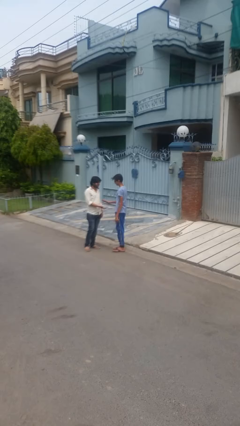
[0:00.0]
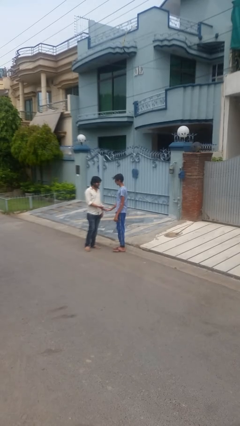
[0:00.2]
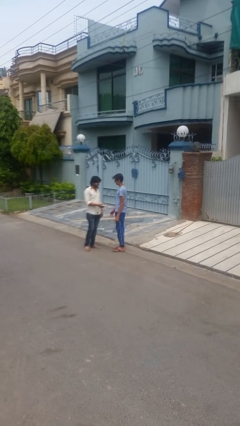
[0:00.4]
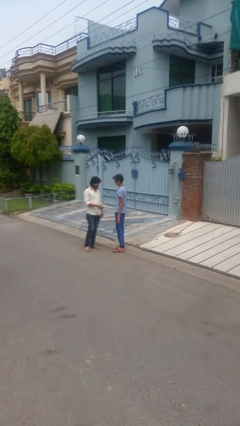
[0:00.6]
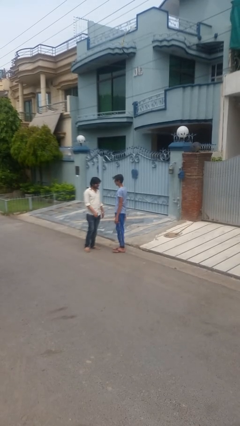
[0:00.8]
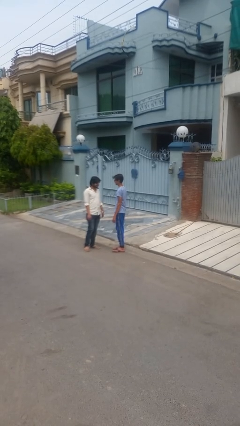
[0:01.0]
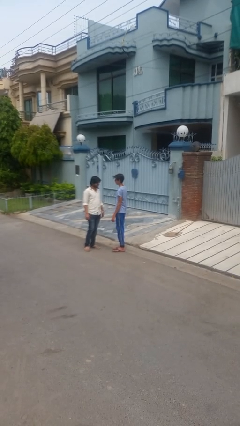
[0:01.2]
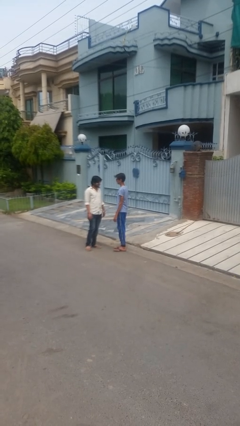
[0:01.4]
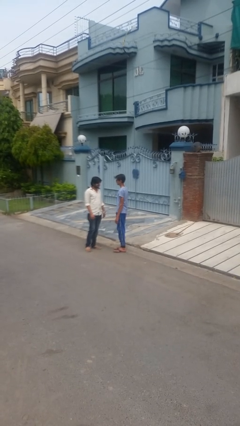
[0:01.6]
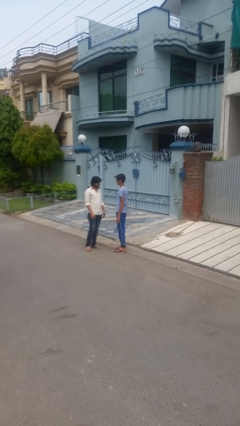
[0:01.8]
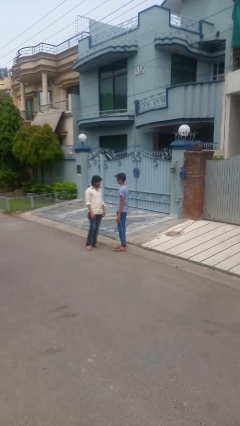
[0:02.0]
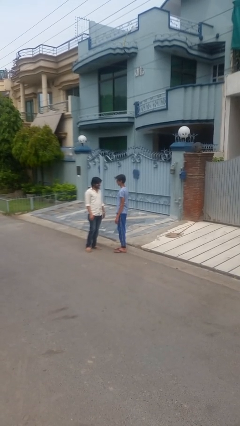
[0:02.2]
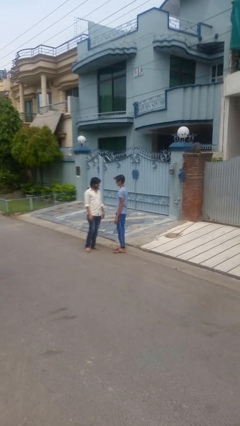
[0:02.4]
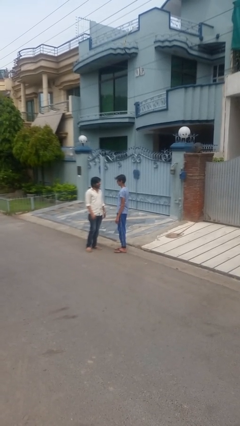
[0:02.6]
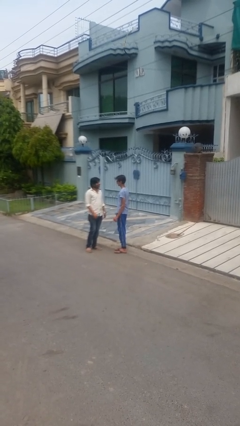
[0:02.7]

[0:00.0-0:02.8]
person highfives hand

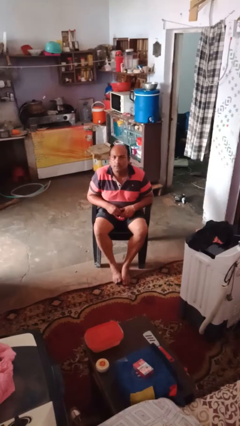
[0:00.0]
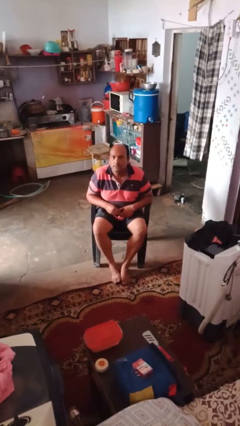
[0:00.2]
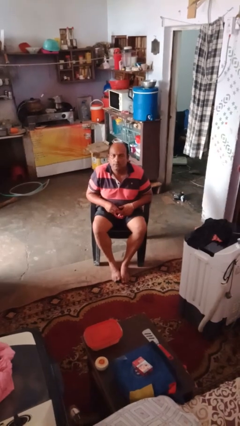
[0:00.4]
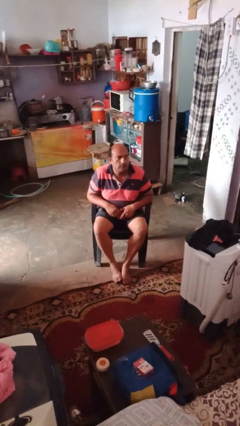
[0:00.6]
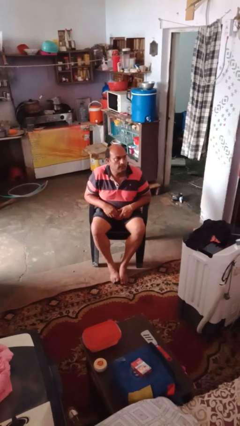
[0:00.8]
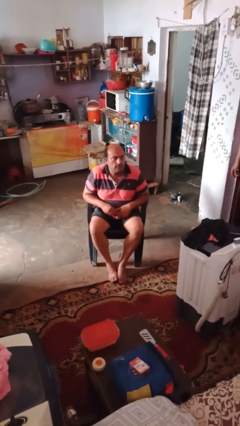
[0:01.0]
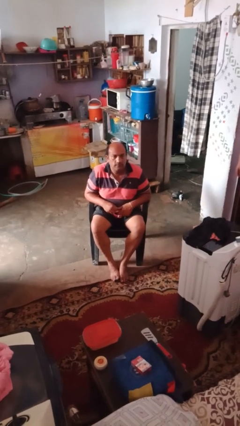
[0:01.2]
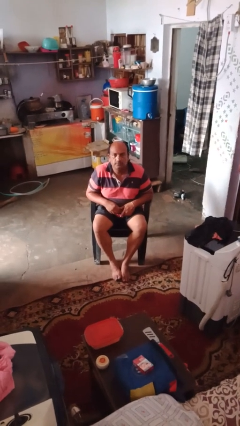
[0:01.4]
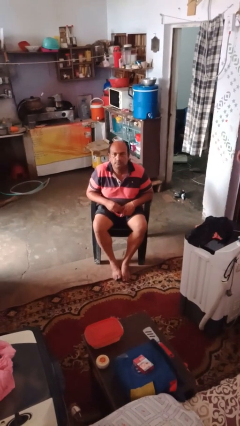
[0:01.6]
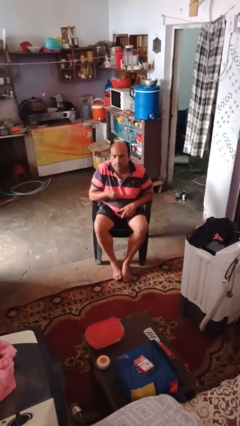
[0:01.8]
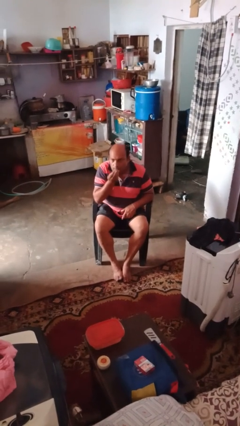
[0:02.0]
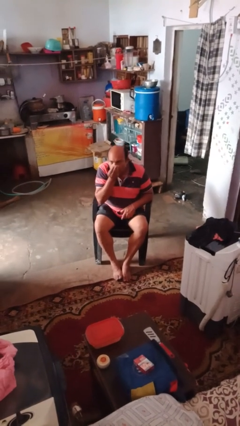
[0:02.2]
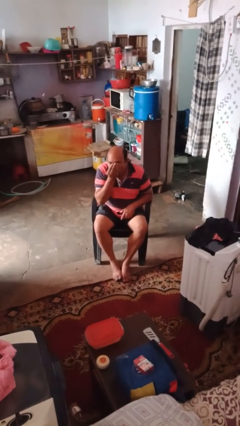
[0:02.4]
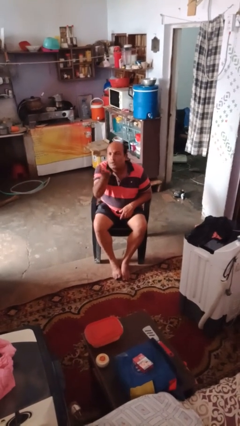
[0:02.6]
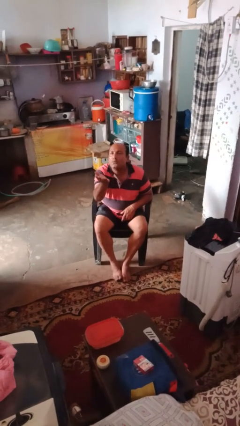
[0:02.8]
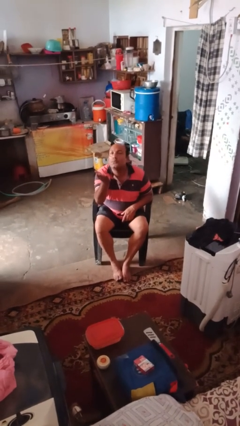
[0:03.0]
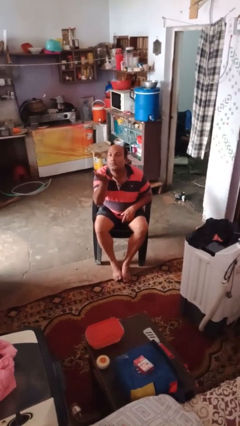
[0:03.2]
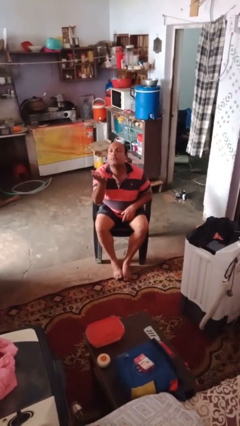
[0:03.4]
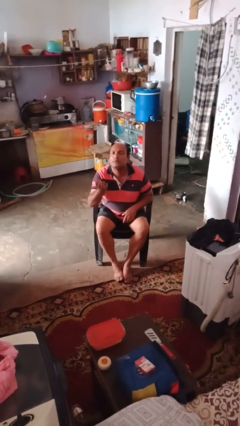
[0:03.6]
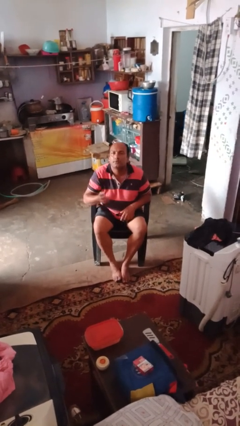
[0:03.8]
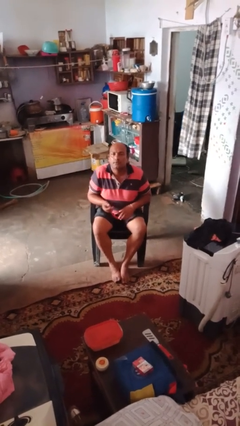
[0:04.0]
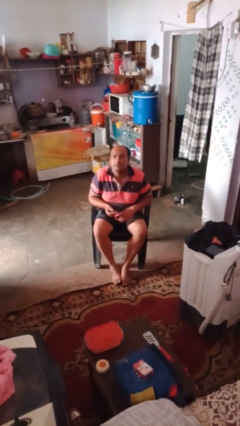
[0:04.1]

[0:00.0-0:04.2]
person gestures blow kiss

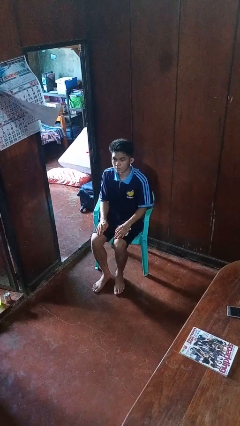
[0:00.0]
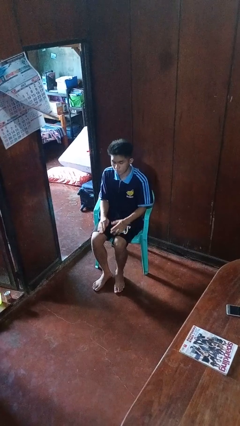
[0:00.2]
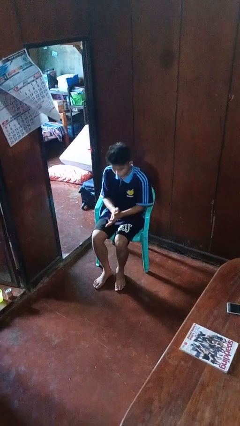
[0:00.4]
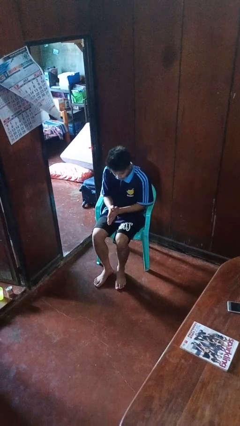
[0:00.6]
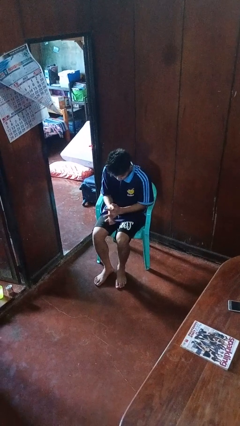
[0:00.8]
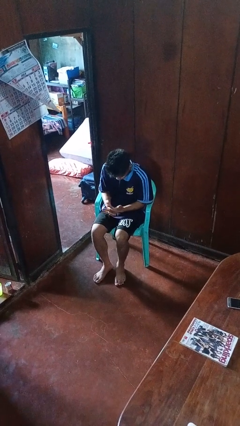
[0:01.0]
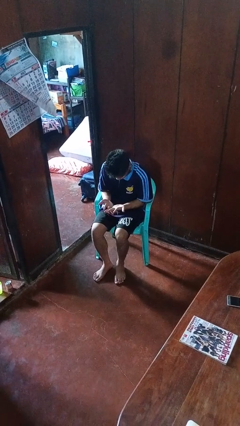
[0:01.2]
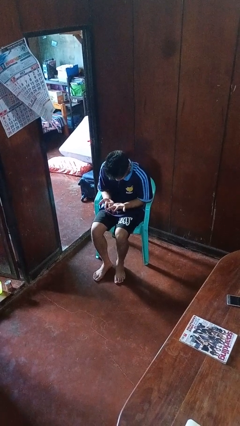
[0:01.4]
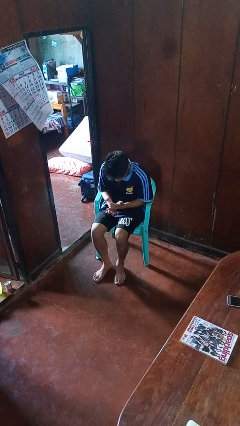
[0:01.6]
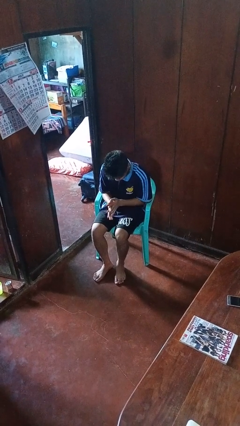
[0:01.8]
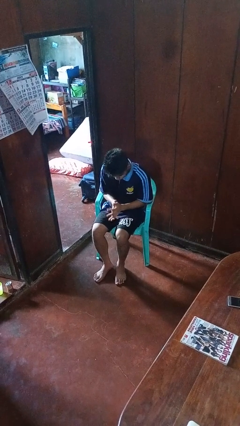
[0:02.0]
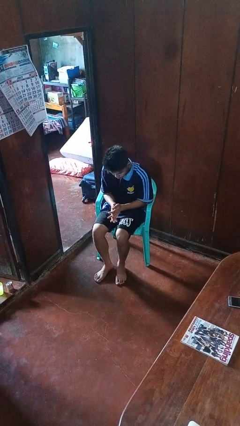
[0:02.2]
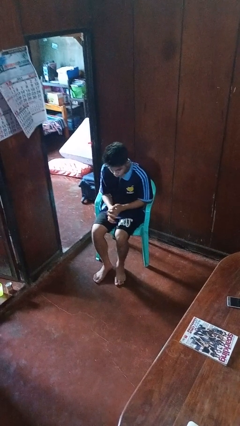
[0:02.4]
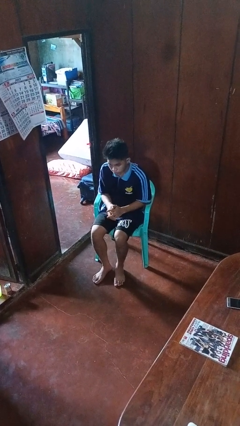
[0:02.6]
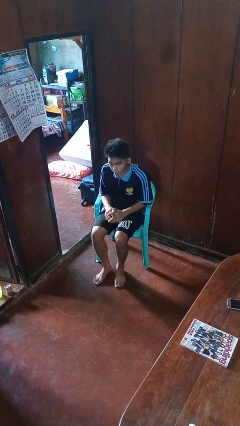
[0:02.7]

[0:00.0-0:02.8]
person looks at hands in lap

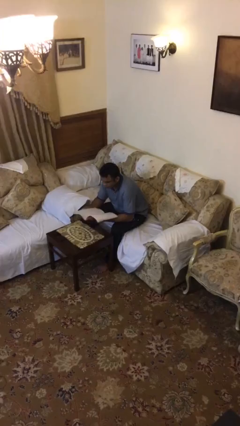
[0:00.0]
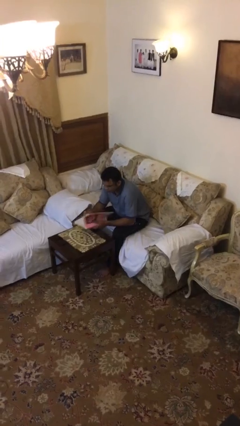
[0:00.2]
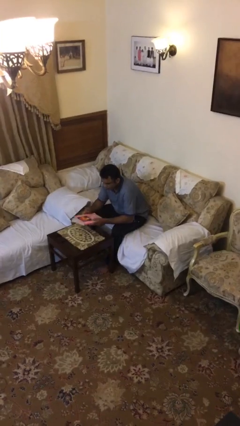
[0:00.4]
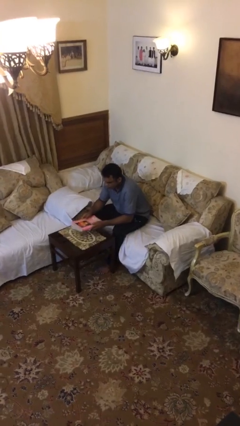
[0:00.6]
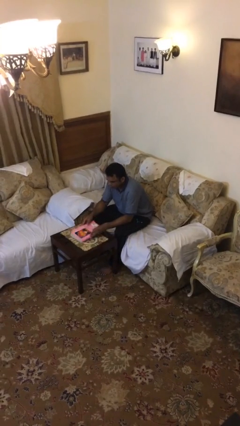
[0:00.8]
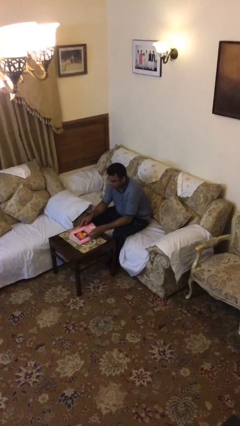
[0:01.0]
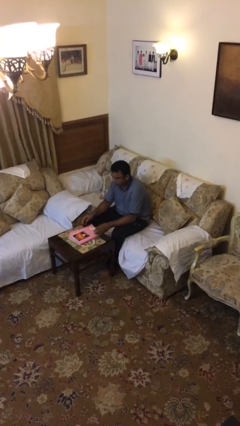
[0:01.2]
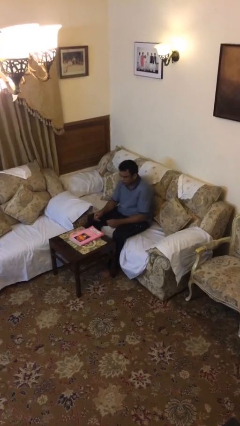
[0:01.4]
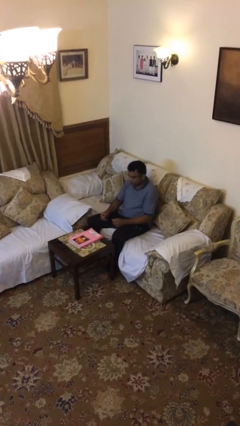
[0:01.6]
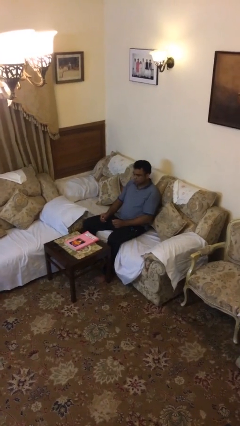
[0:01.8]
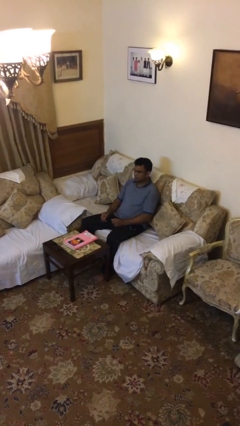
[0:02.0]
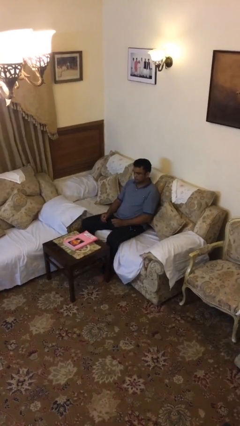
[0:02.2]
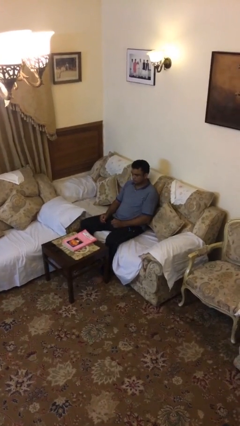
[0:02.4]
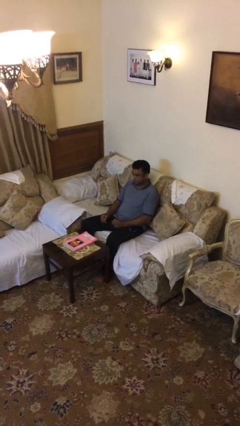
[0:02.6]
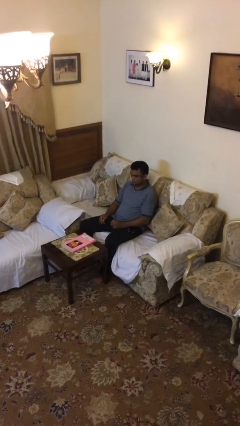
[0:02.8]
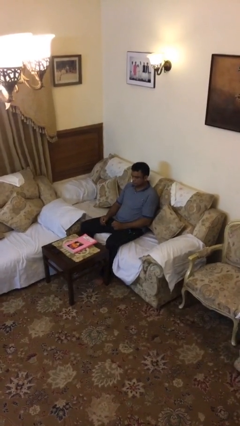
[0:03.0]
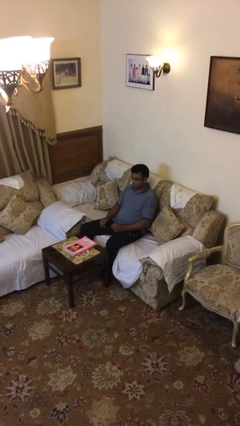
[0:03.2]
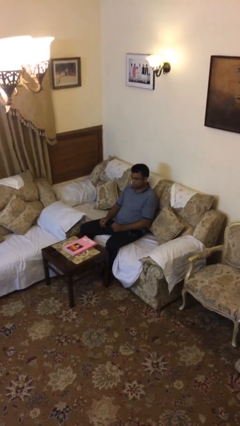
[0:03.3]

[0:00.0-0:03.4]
person puts down object on table

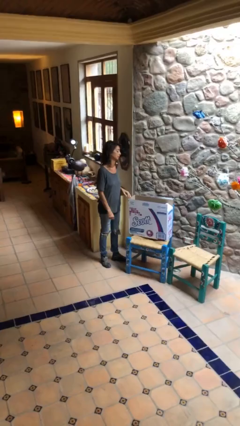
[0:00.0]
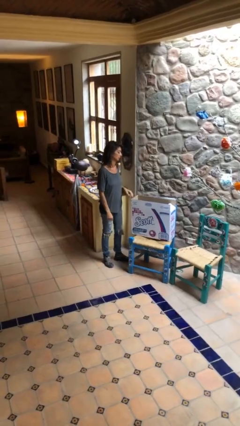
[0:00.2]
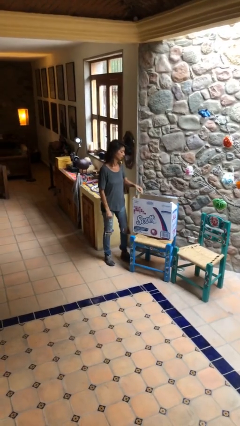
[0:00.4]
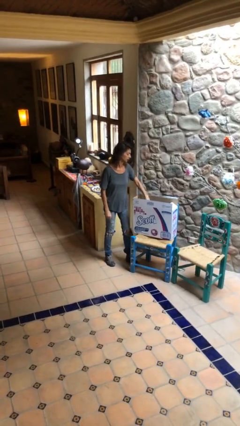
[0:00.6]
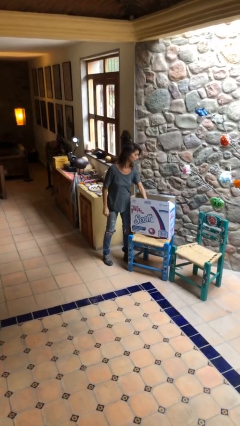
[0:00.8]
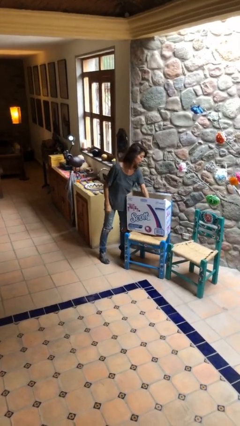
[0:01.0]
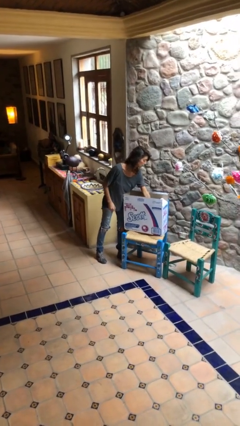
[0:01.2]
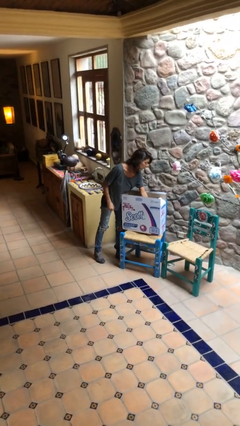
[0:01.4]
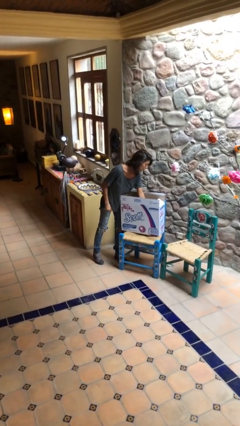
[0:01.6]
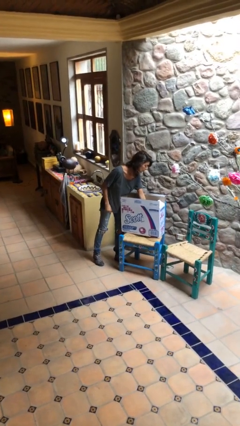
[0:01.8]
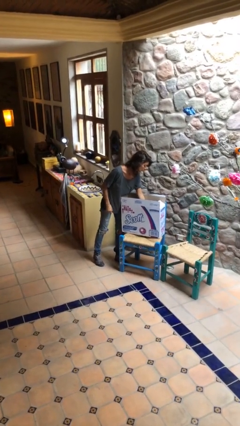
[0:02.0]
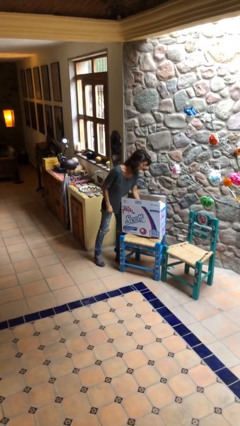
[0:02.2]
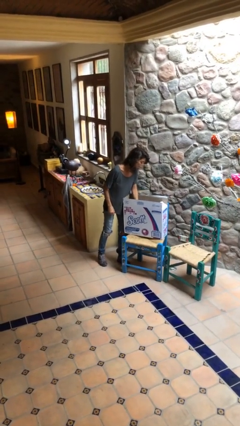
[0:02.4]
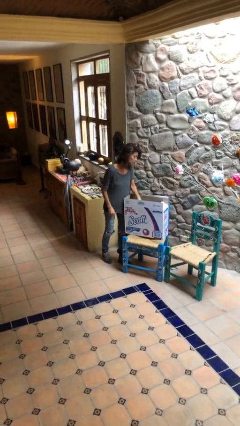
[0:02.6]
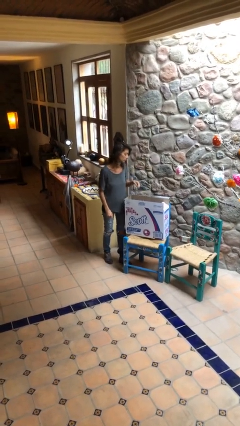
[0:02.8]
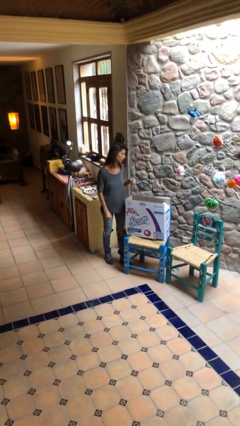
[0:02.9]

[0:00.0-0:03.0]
person searches in box

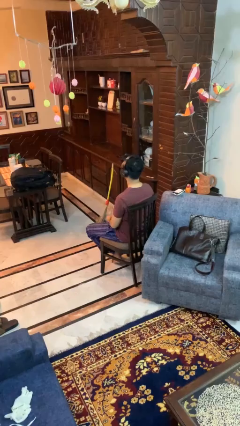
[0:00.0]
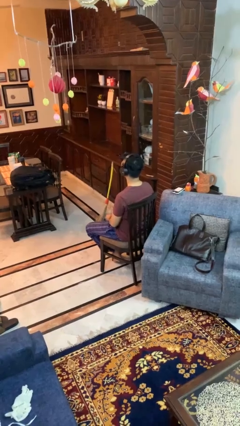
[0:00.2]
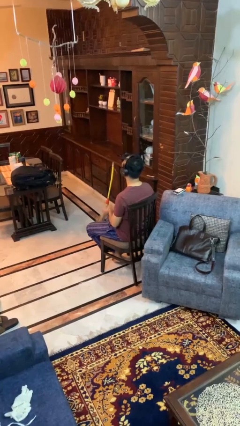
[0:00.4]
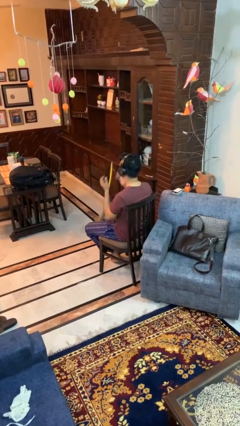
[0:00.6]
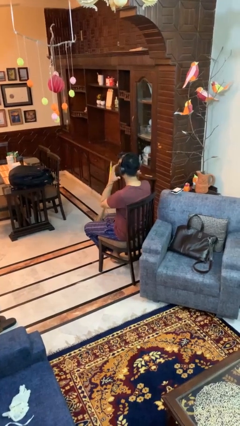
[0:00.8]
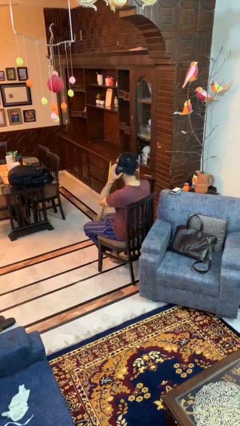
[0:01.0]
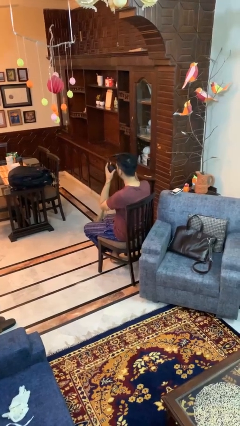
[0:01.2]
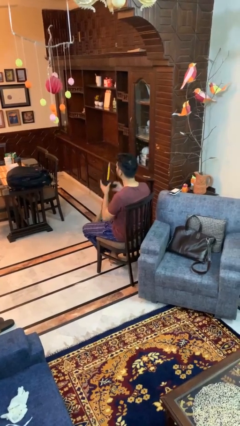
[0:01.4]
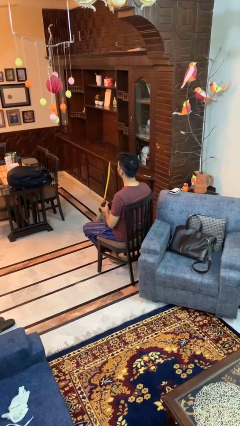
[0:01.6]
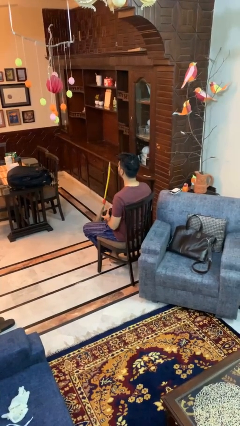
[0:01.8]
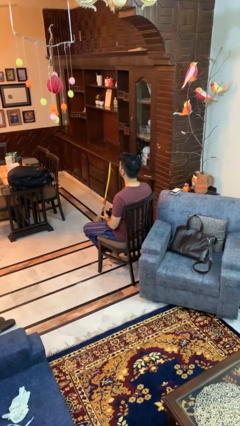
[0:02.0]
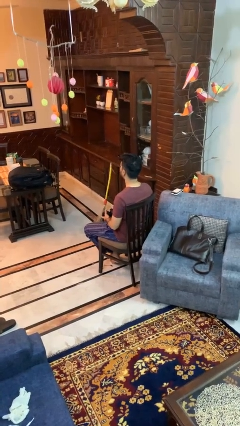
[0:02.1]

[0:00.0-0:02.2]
person takes off headphones
